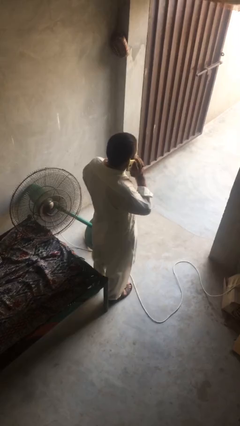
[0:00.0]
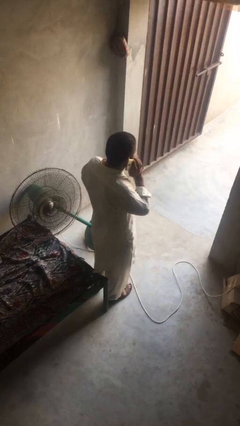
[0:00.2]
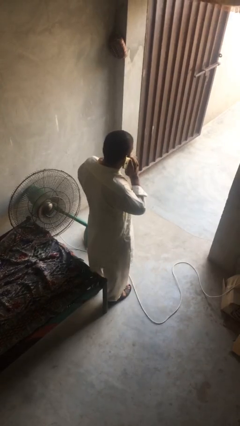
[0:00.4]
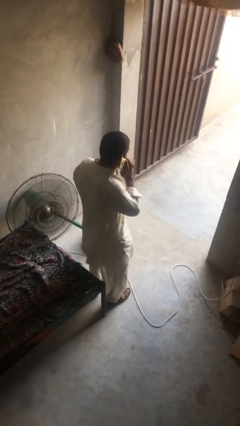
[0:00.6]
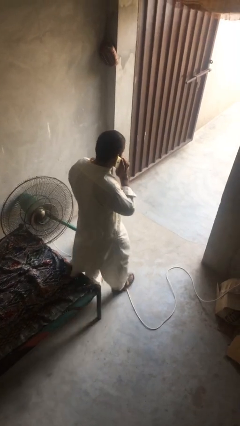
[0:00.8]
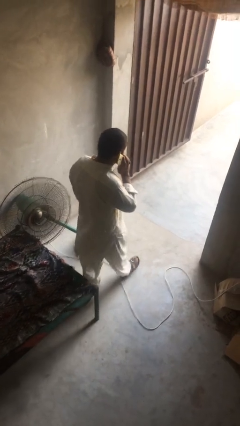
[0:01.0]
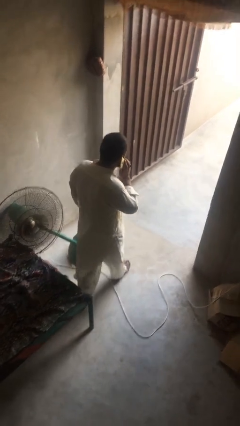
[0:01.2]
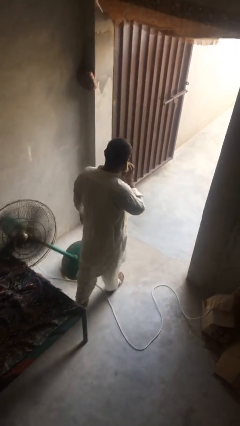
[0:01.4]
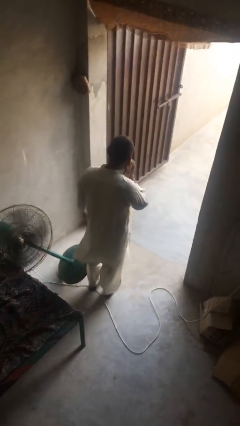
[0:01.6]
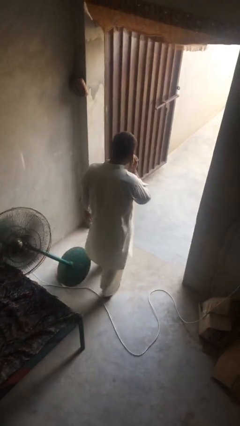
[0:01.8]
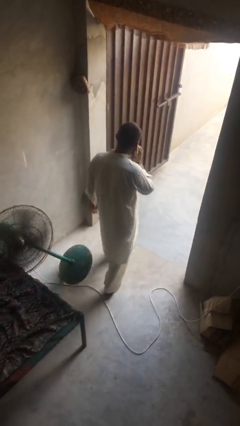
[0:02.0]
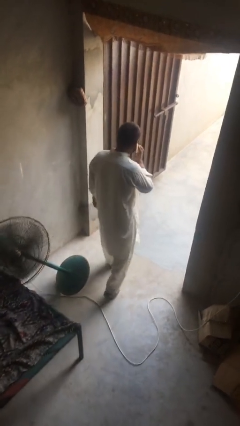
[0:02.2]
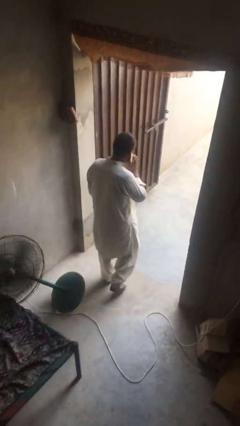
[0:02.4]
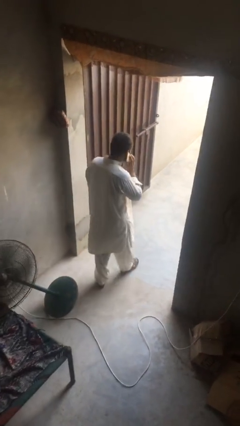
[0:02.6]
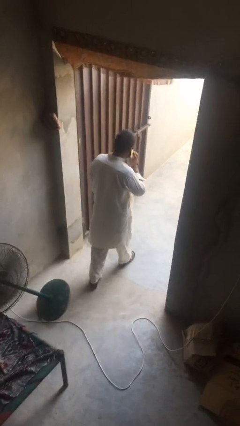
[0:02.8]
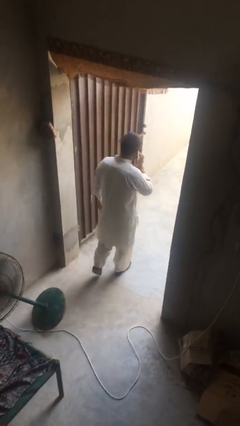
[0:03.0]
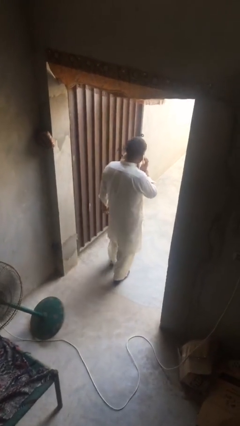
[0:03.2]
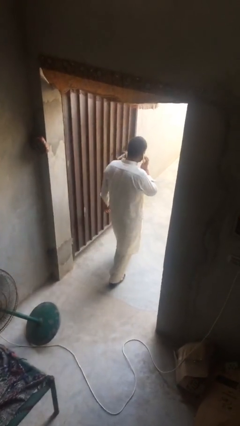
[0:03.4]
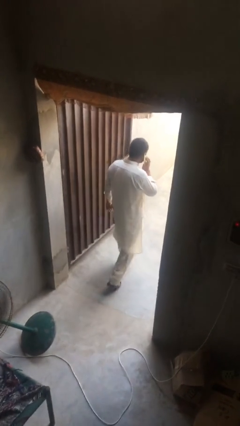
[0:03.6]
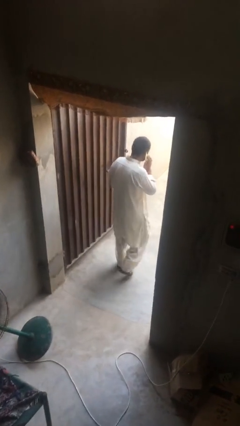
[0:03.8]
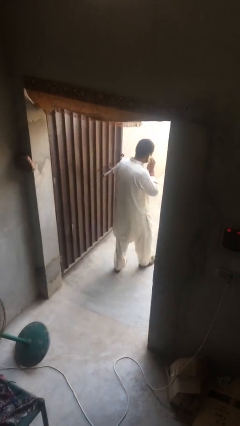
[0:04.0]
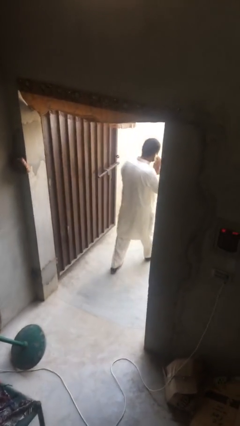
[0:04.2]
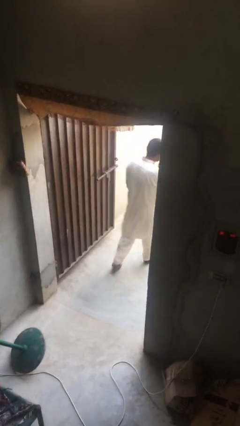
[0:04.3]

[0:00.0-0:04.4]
person exits scene through structure

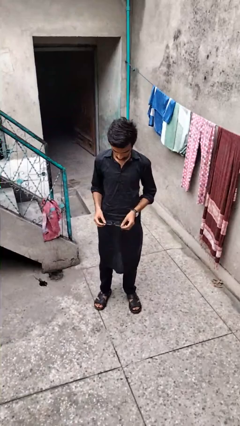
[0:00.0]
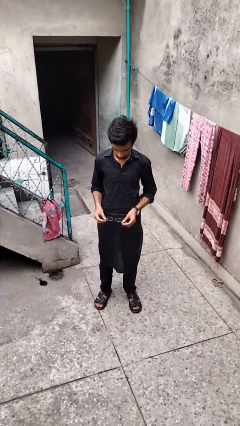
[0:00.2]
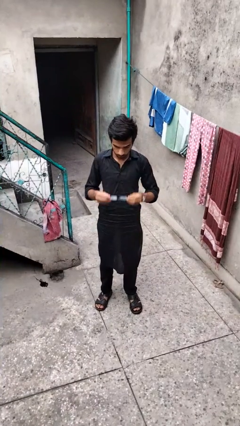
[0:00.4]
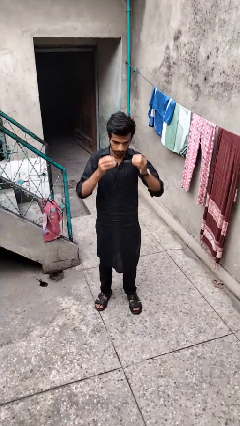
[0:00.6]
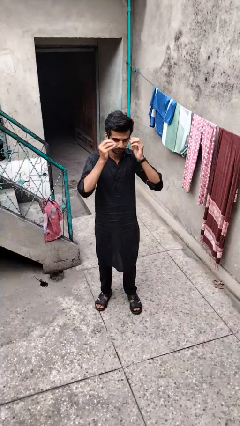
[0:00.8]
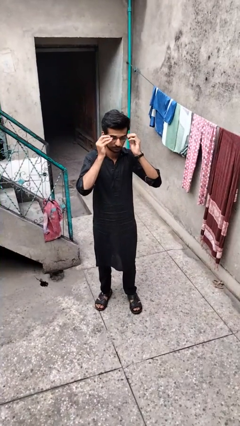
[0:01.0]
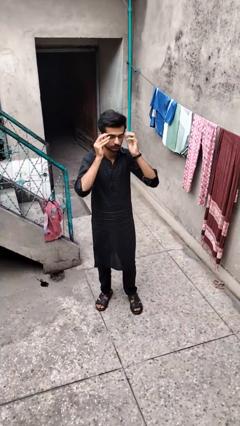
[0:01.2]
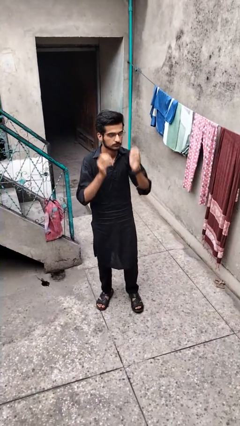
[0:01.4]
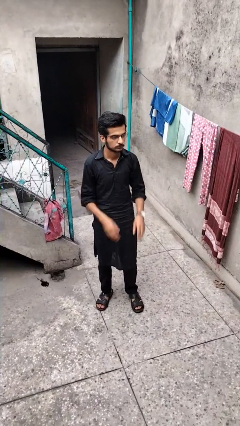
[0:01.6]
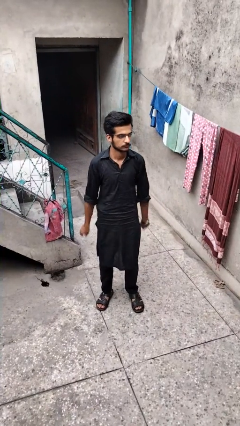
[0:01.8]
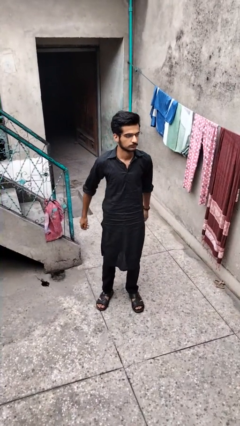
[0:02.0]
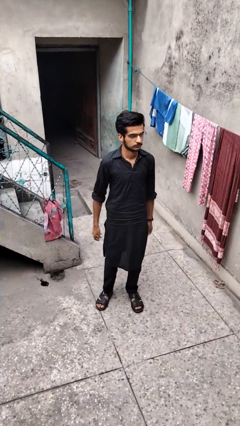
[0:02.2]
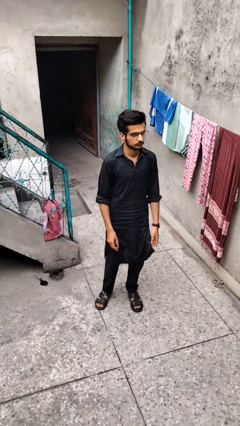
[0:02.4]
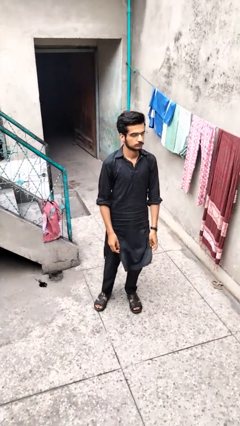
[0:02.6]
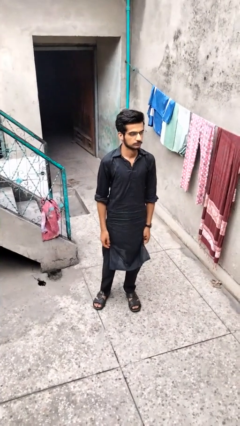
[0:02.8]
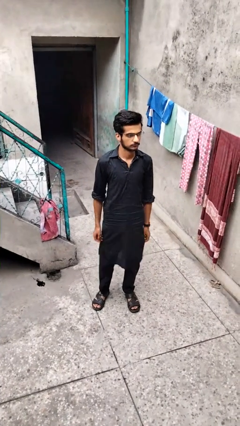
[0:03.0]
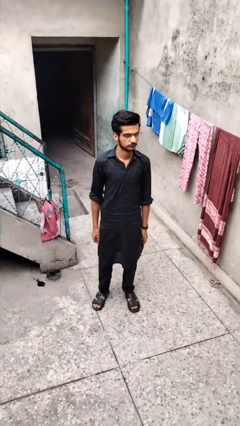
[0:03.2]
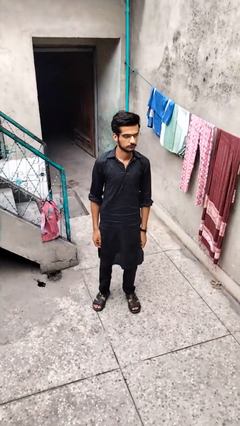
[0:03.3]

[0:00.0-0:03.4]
person puts on glasses

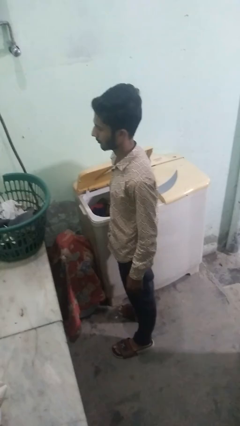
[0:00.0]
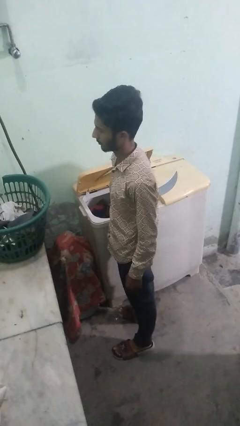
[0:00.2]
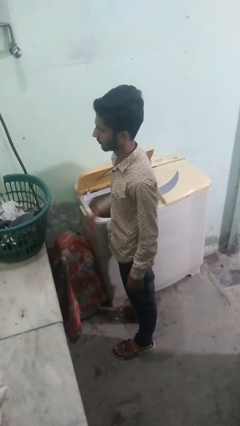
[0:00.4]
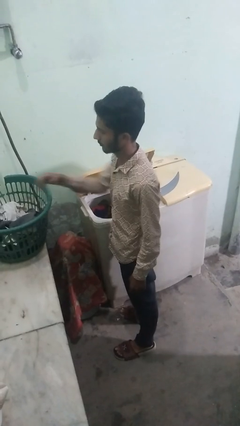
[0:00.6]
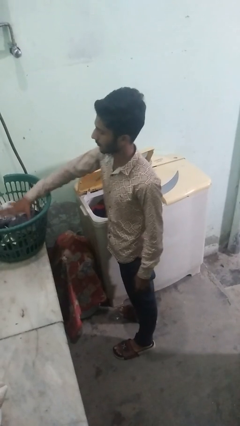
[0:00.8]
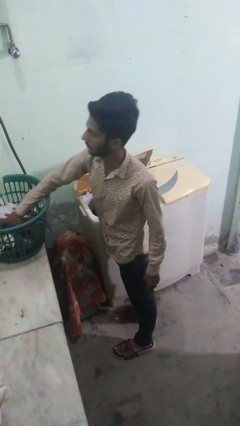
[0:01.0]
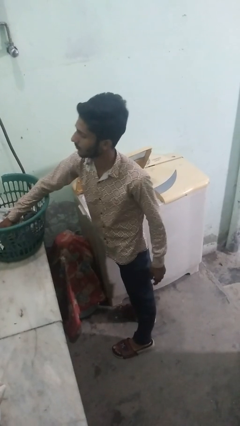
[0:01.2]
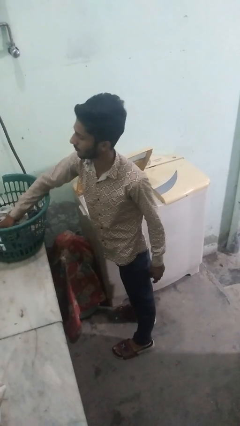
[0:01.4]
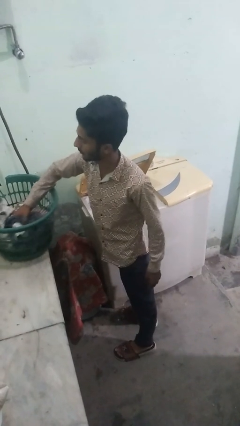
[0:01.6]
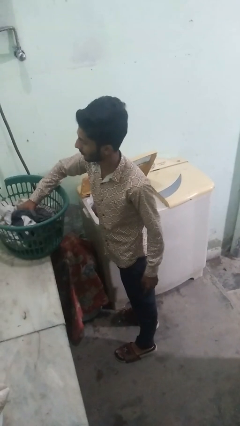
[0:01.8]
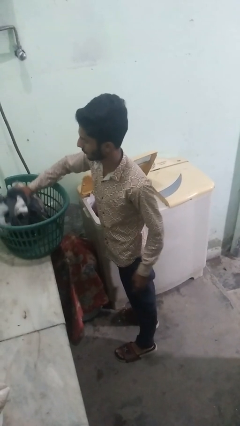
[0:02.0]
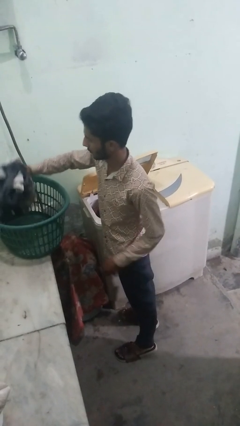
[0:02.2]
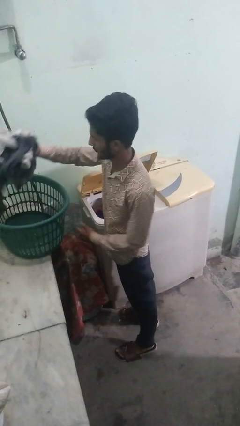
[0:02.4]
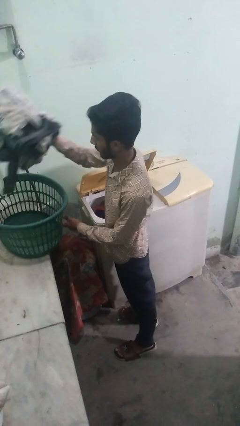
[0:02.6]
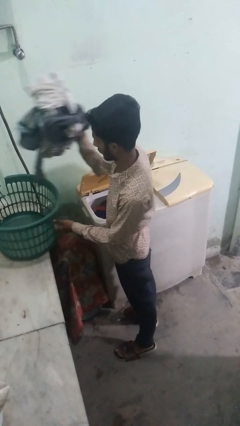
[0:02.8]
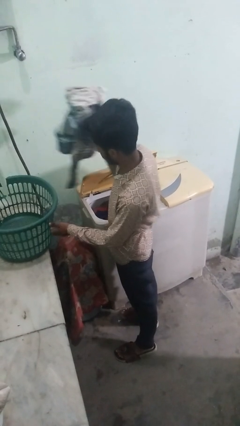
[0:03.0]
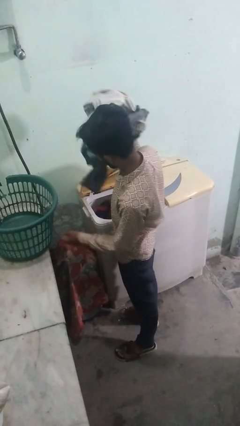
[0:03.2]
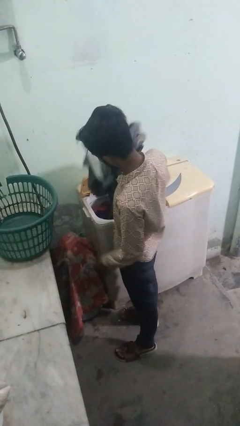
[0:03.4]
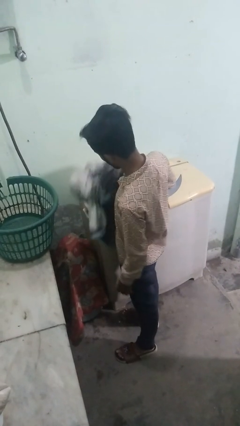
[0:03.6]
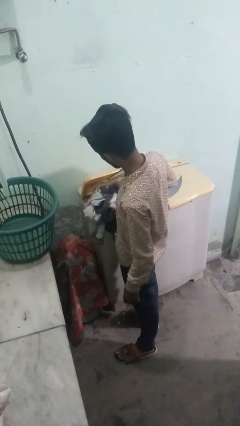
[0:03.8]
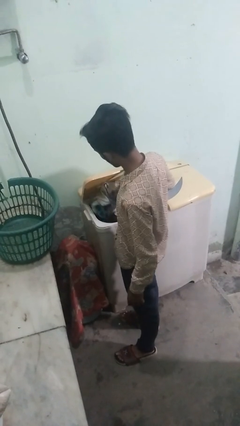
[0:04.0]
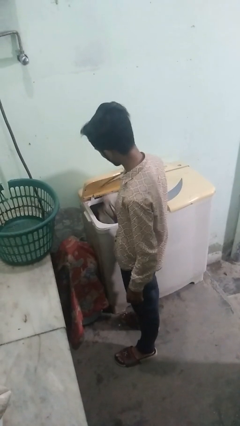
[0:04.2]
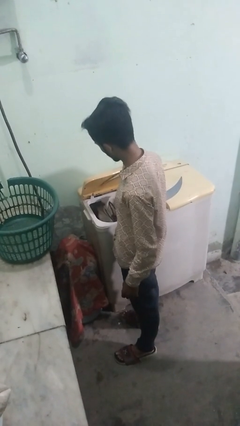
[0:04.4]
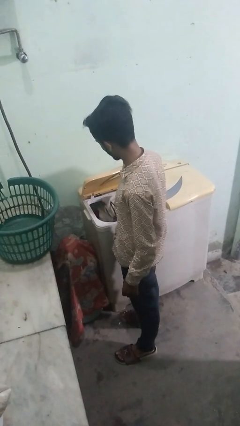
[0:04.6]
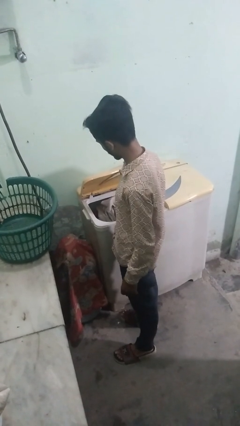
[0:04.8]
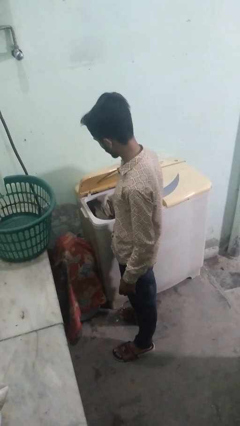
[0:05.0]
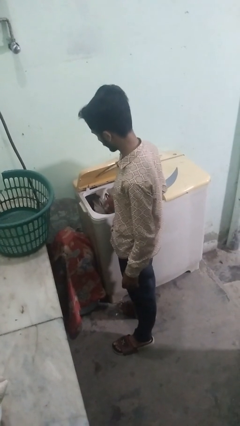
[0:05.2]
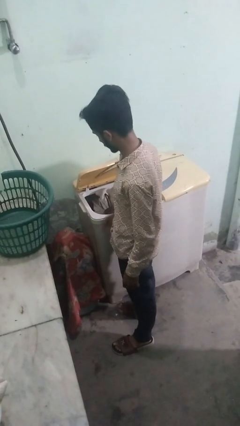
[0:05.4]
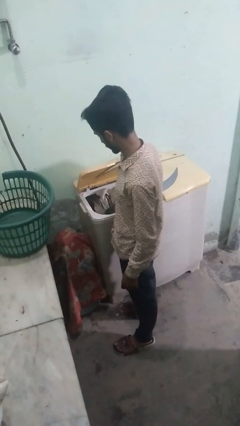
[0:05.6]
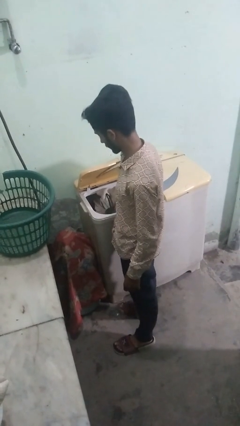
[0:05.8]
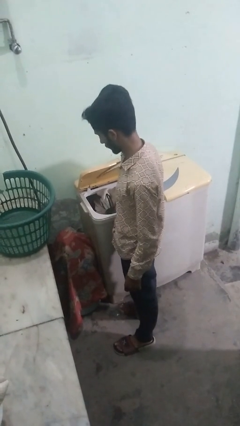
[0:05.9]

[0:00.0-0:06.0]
person loads clotheswasher

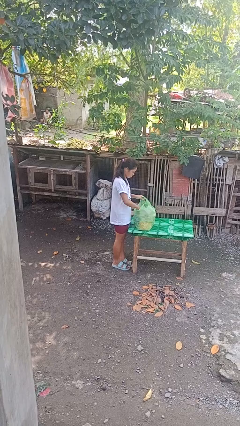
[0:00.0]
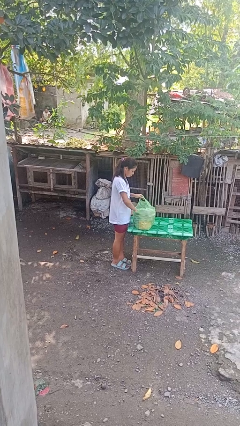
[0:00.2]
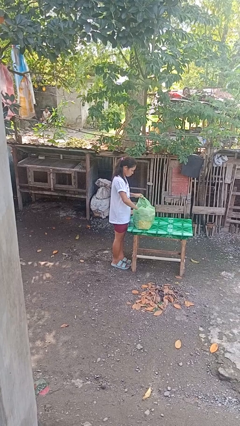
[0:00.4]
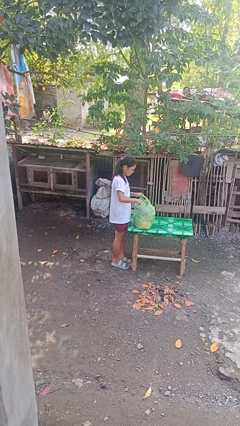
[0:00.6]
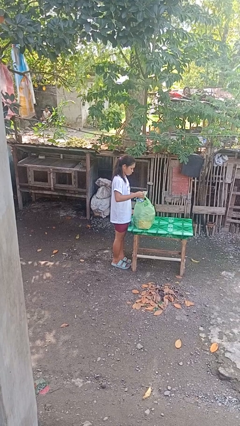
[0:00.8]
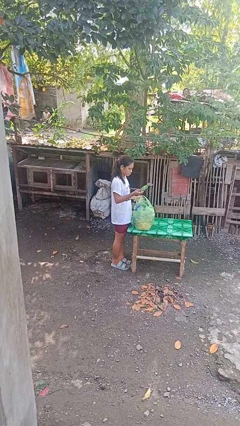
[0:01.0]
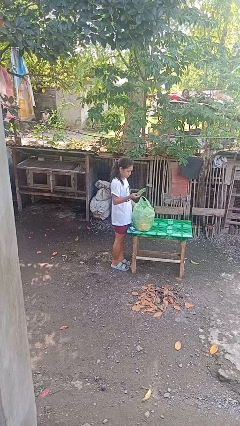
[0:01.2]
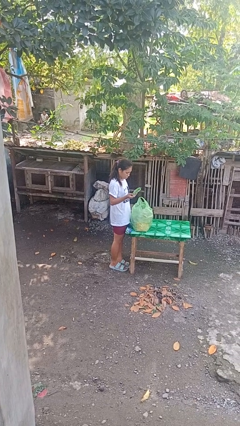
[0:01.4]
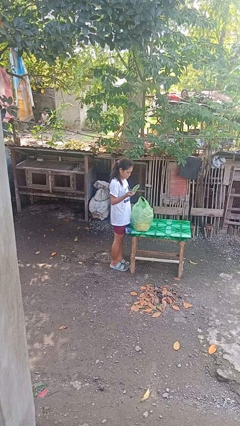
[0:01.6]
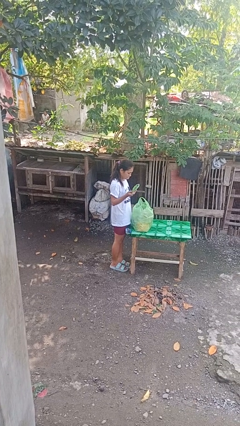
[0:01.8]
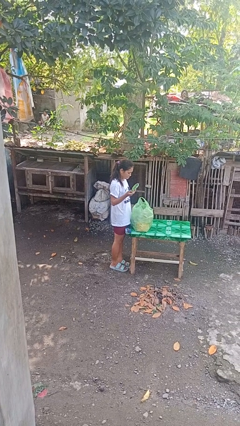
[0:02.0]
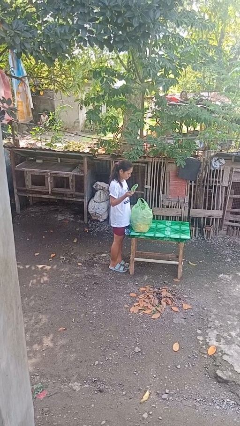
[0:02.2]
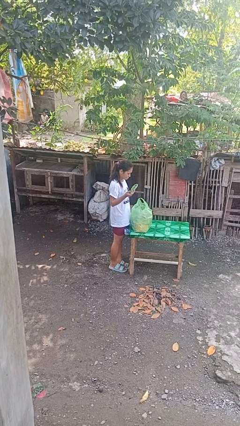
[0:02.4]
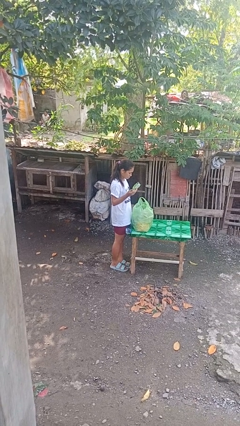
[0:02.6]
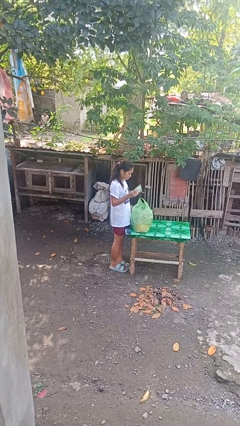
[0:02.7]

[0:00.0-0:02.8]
person takes object from bag

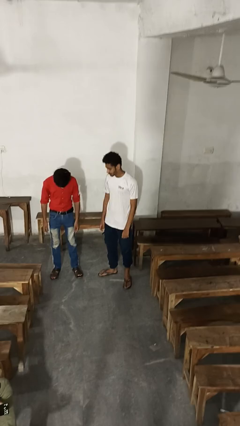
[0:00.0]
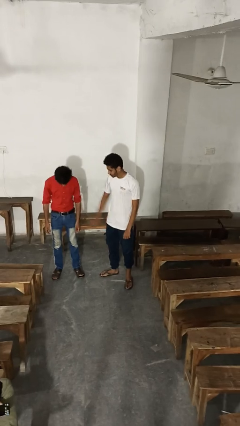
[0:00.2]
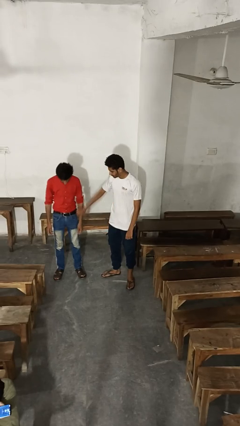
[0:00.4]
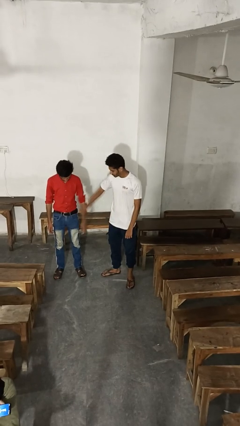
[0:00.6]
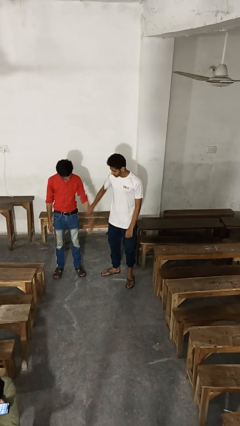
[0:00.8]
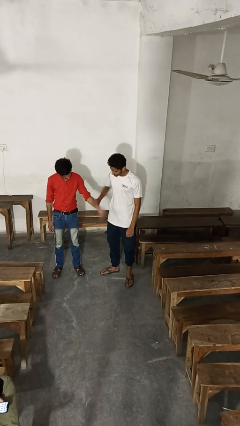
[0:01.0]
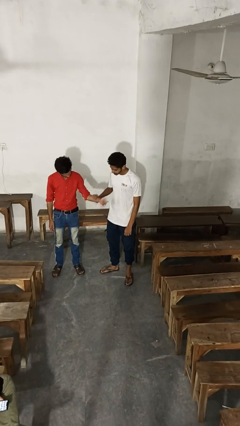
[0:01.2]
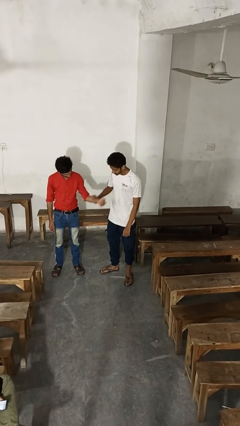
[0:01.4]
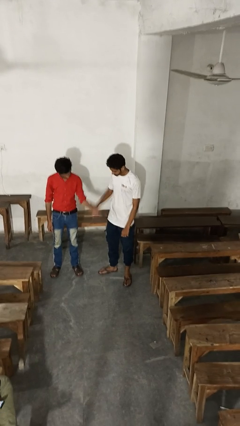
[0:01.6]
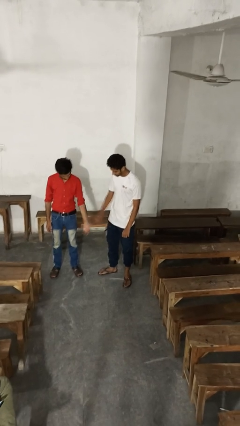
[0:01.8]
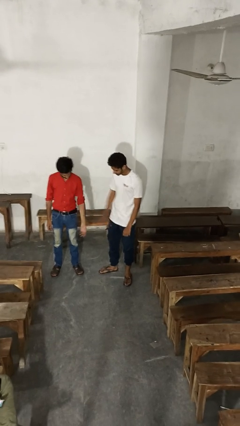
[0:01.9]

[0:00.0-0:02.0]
person grabs person by forearm
